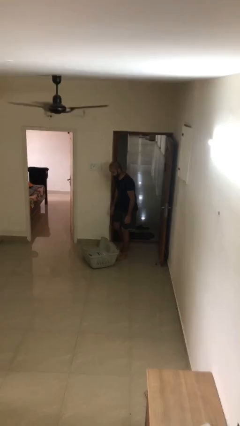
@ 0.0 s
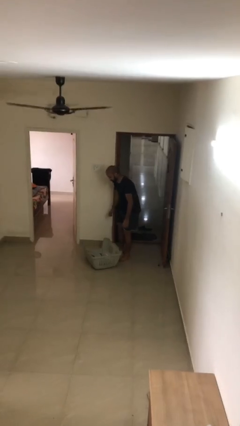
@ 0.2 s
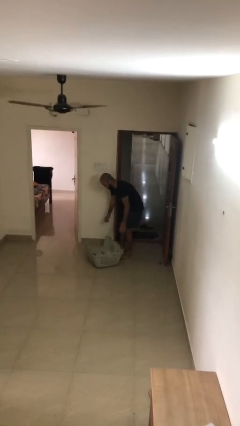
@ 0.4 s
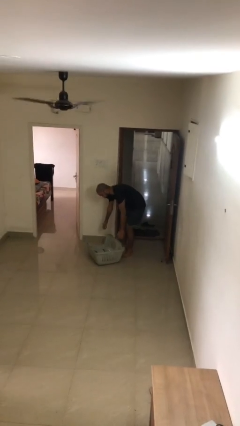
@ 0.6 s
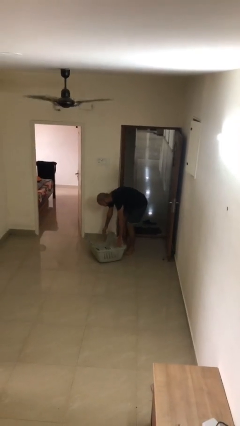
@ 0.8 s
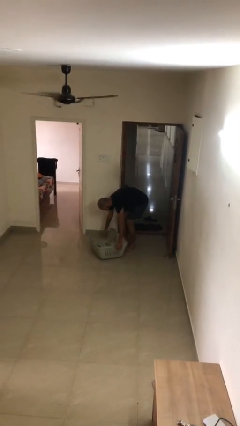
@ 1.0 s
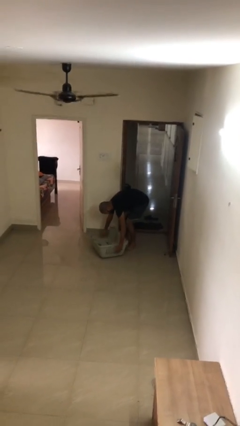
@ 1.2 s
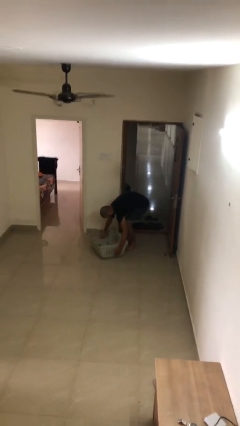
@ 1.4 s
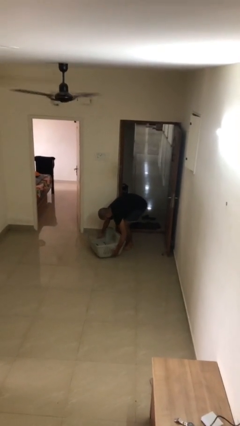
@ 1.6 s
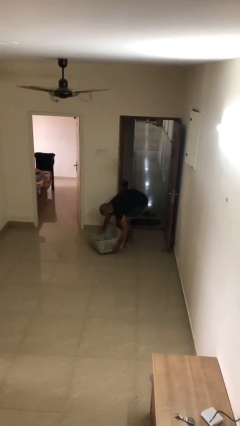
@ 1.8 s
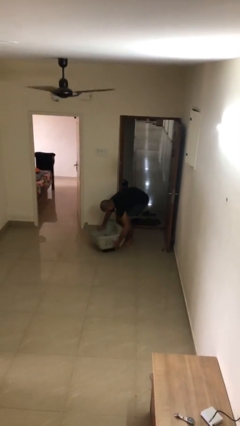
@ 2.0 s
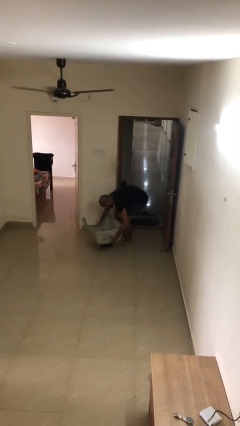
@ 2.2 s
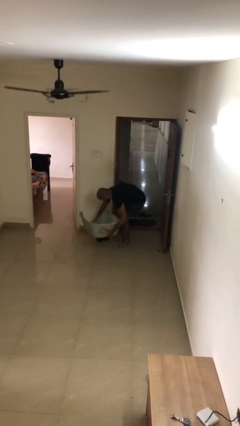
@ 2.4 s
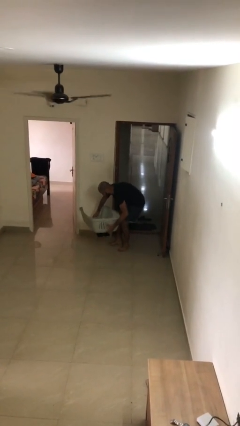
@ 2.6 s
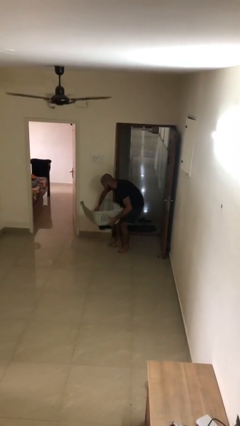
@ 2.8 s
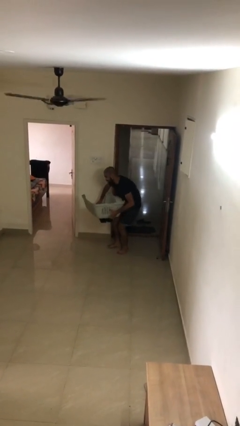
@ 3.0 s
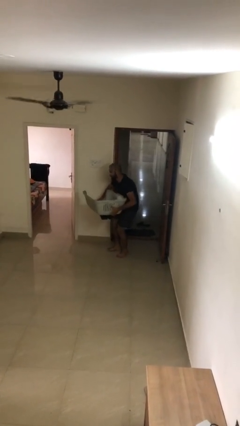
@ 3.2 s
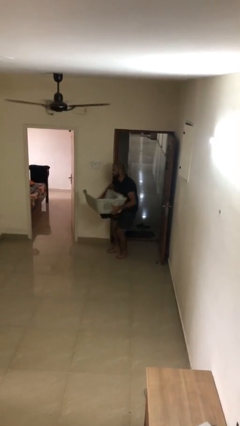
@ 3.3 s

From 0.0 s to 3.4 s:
person picks up object from floor

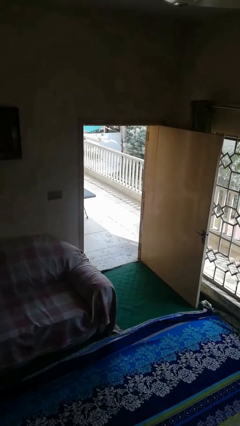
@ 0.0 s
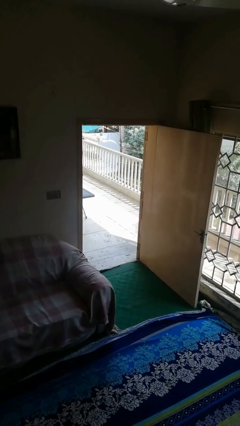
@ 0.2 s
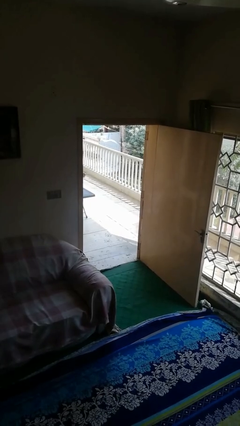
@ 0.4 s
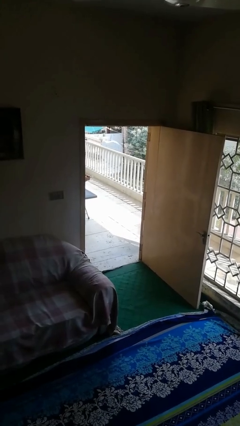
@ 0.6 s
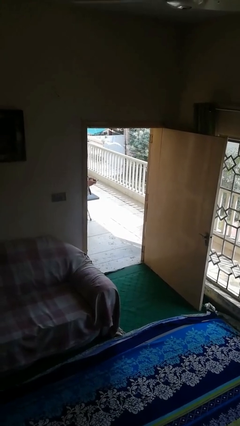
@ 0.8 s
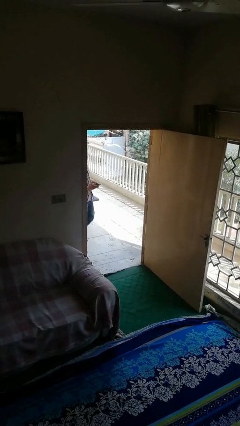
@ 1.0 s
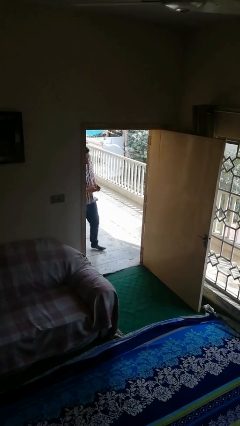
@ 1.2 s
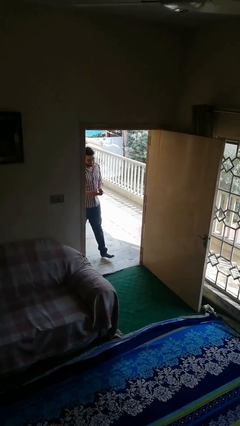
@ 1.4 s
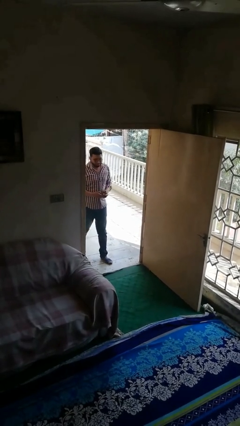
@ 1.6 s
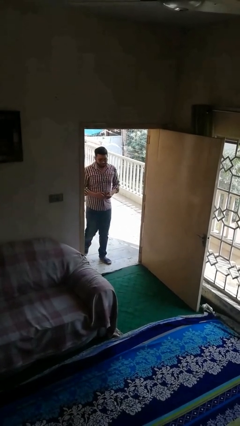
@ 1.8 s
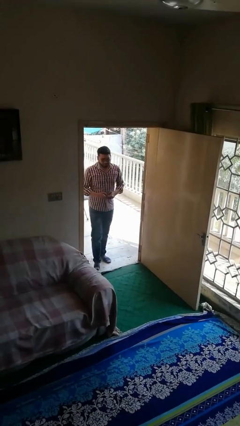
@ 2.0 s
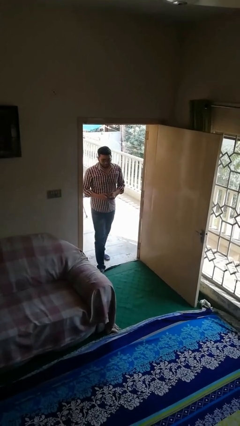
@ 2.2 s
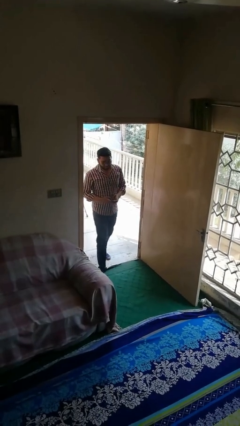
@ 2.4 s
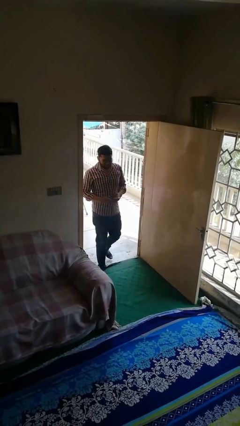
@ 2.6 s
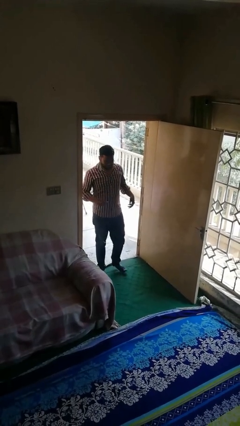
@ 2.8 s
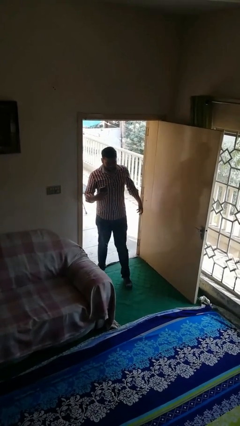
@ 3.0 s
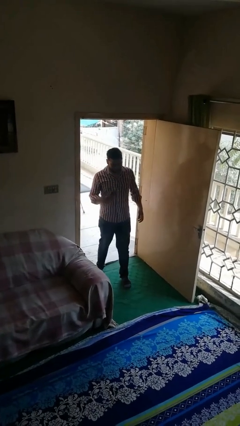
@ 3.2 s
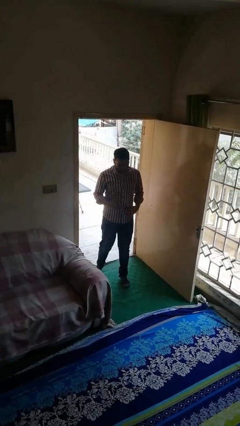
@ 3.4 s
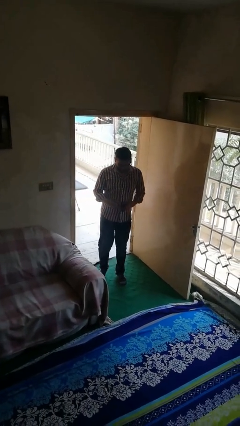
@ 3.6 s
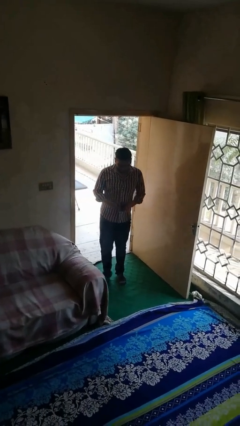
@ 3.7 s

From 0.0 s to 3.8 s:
person enters scene through structure

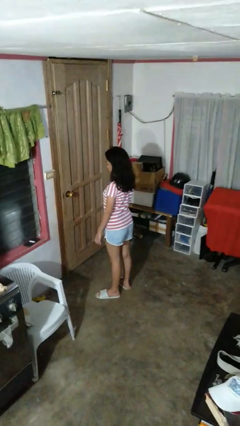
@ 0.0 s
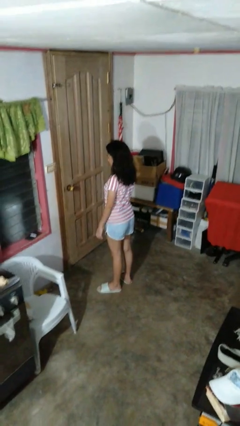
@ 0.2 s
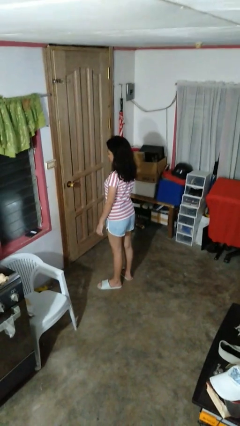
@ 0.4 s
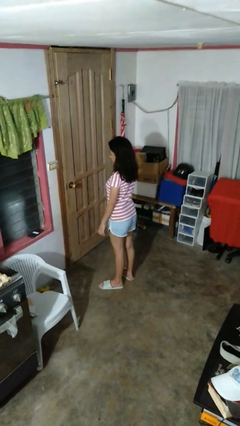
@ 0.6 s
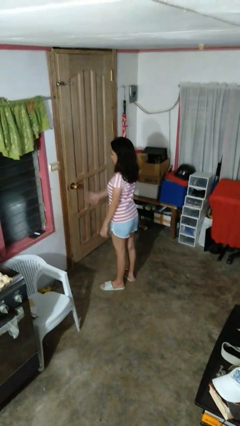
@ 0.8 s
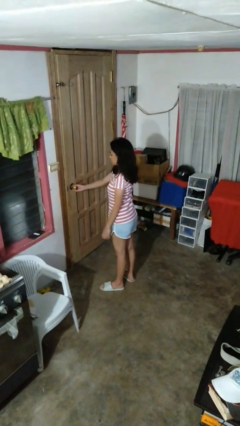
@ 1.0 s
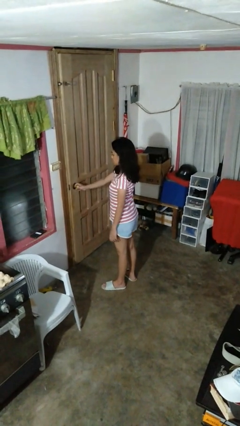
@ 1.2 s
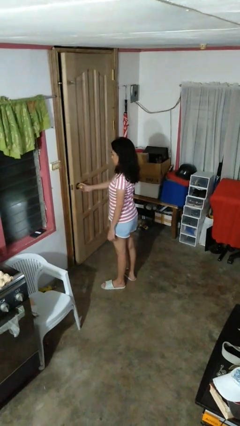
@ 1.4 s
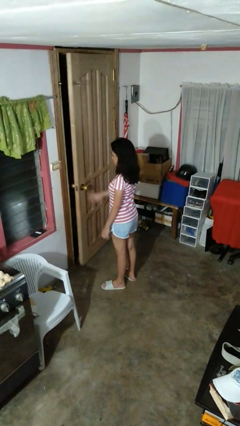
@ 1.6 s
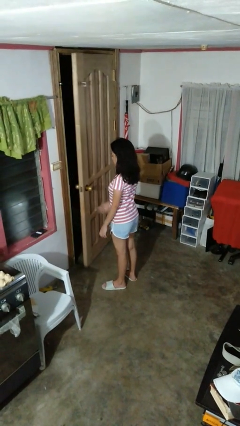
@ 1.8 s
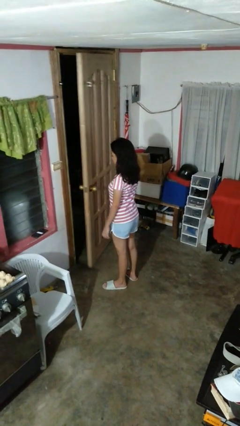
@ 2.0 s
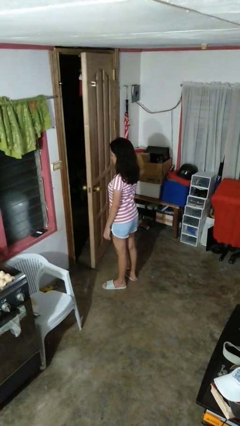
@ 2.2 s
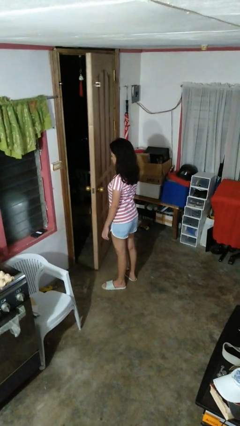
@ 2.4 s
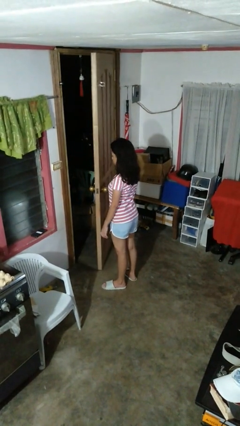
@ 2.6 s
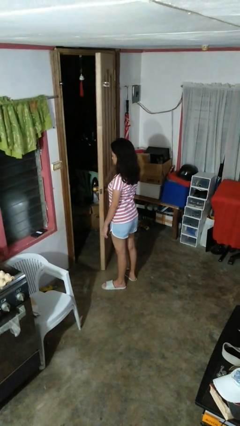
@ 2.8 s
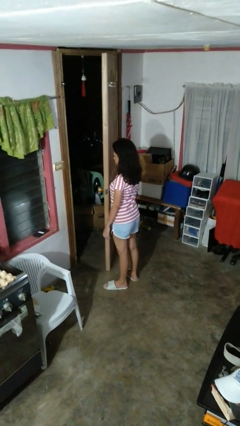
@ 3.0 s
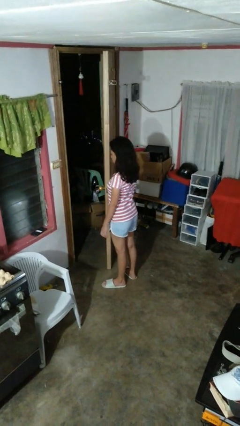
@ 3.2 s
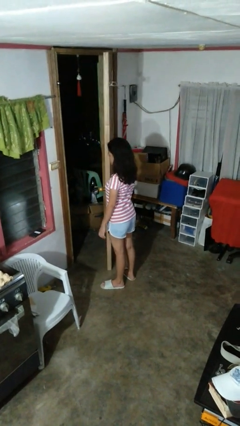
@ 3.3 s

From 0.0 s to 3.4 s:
person opens facility door

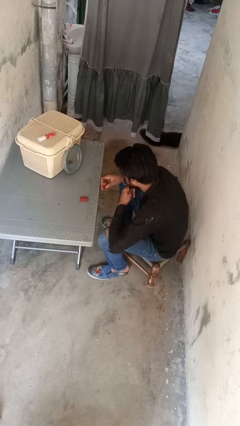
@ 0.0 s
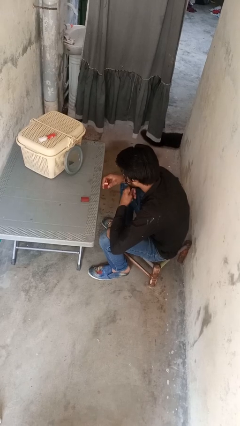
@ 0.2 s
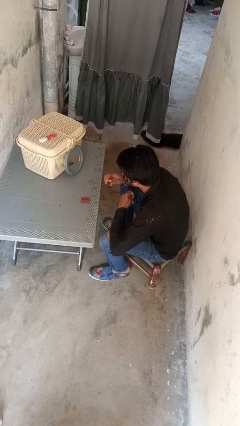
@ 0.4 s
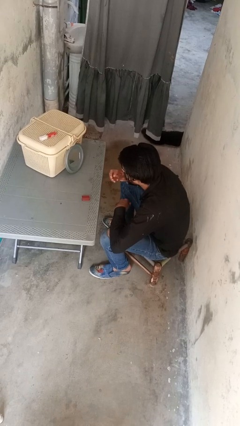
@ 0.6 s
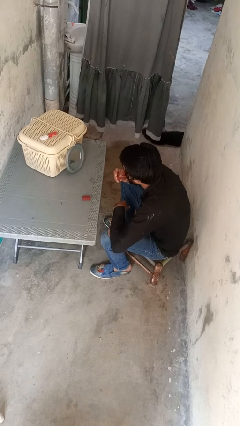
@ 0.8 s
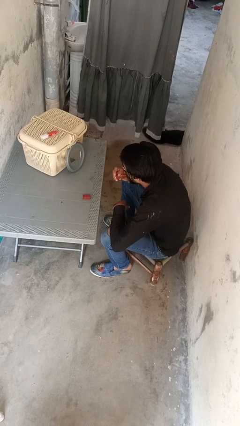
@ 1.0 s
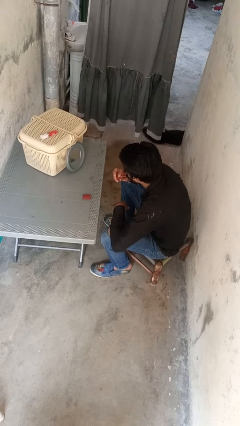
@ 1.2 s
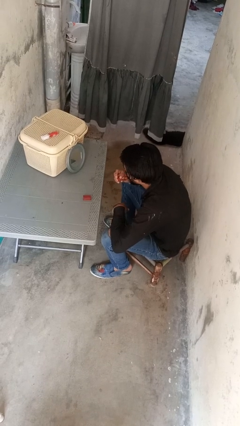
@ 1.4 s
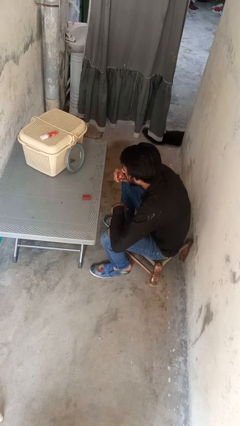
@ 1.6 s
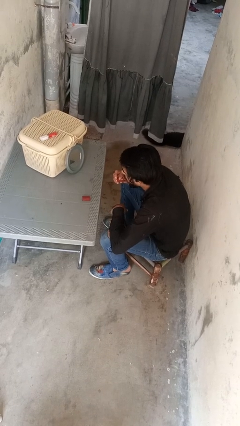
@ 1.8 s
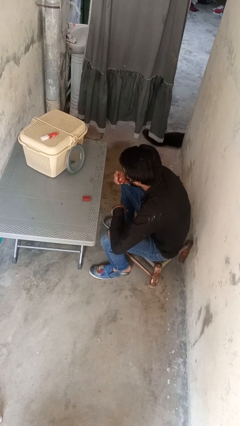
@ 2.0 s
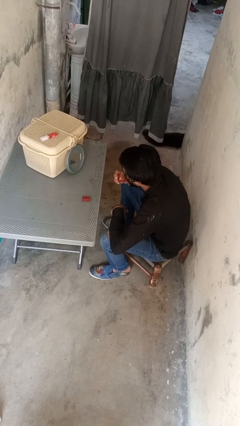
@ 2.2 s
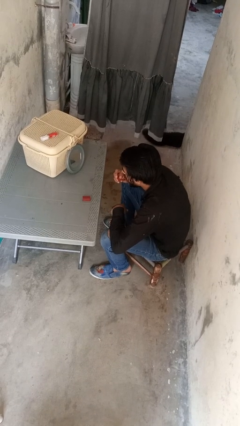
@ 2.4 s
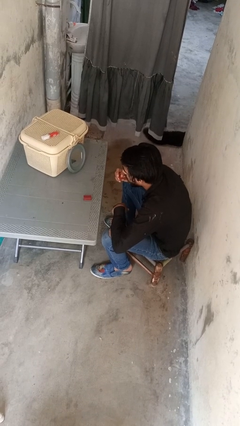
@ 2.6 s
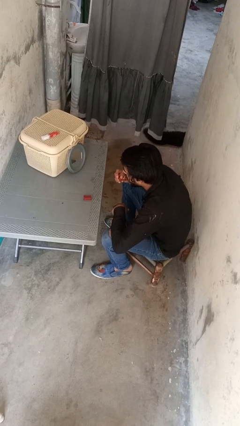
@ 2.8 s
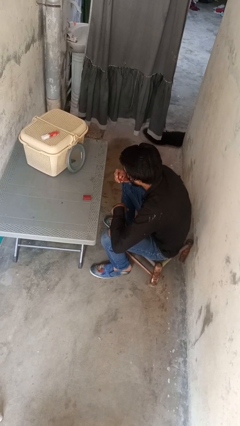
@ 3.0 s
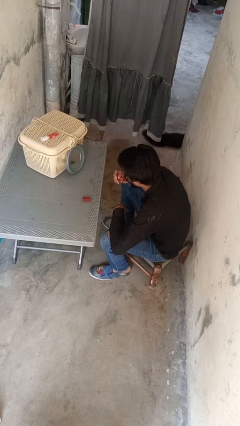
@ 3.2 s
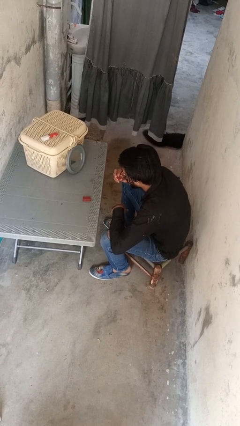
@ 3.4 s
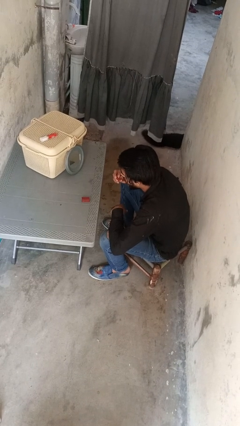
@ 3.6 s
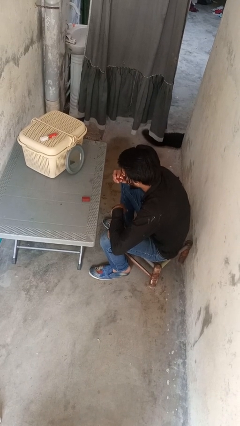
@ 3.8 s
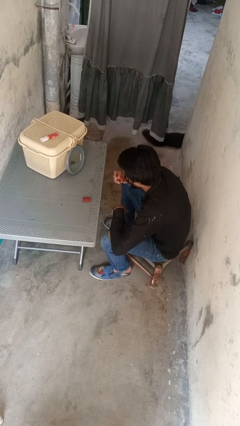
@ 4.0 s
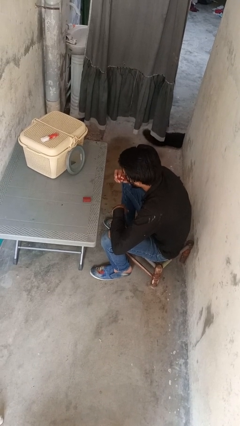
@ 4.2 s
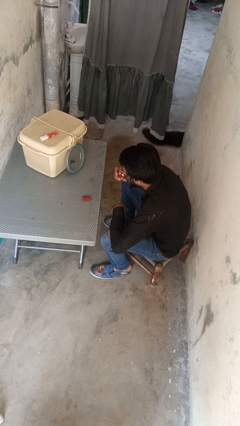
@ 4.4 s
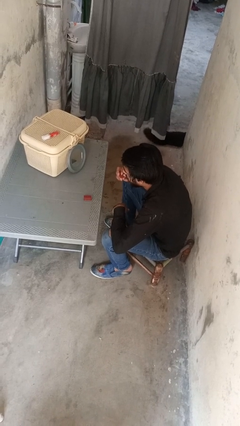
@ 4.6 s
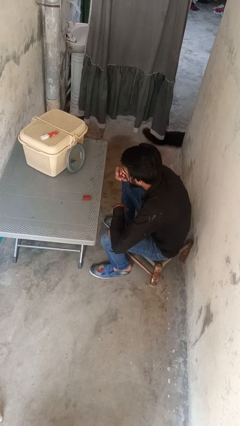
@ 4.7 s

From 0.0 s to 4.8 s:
person applies lip makeup

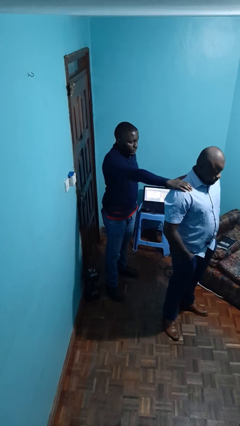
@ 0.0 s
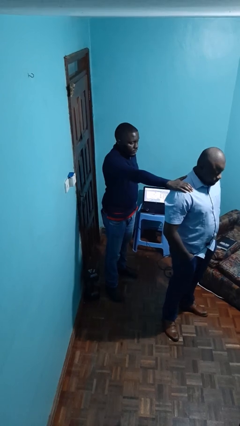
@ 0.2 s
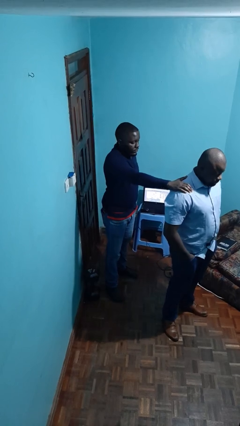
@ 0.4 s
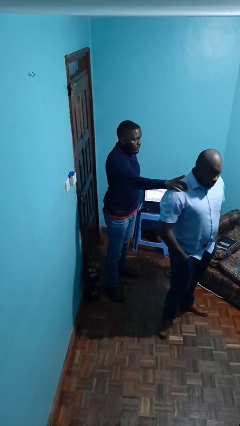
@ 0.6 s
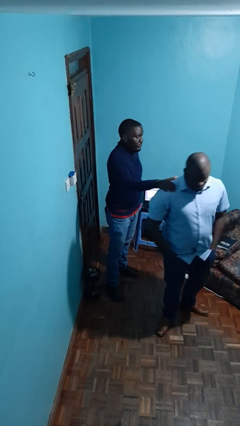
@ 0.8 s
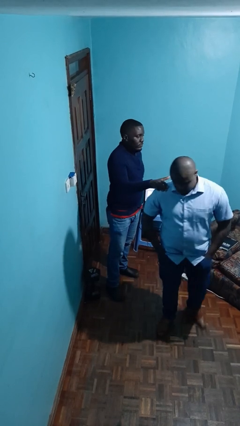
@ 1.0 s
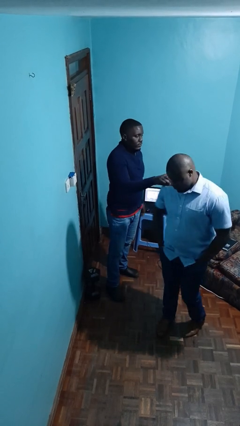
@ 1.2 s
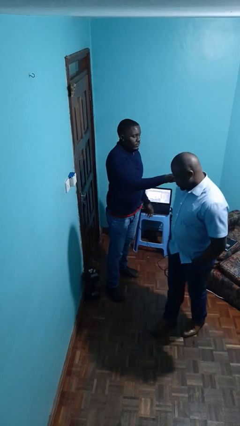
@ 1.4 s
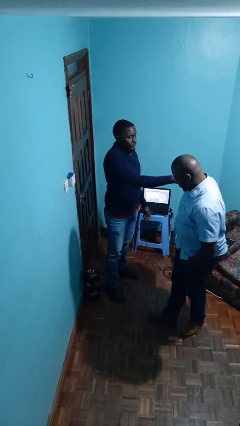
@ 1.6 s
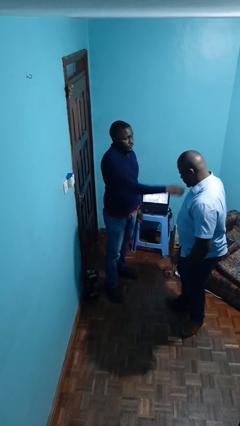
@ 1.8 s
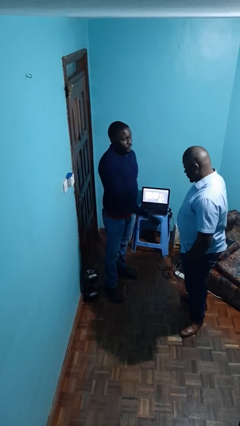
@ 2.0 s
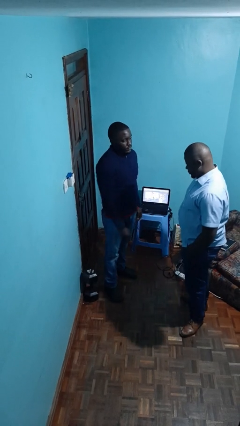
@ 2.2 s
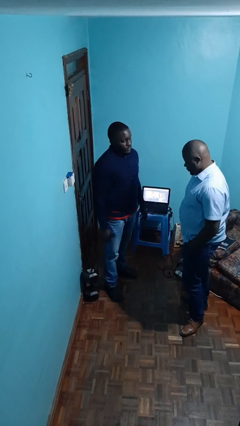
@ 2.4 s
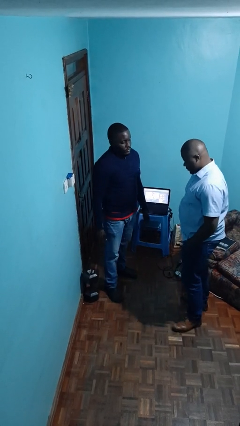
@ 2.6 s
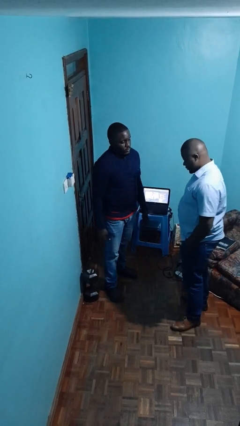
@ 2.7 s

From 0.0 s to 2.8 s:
person spins person around
